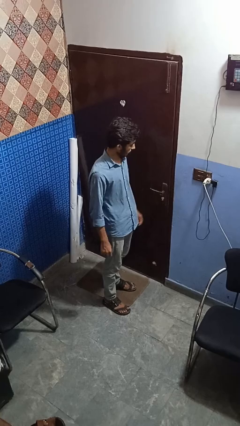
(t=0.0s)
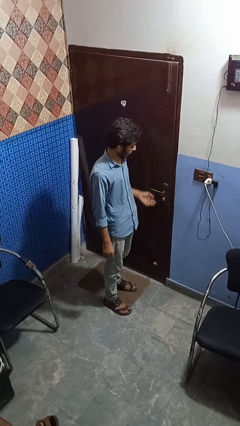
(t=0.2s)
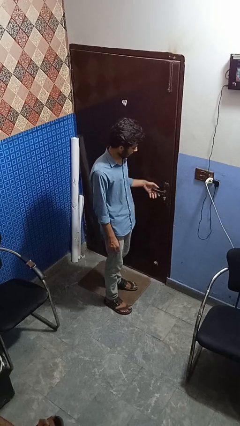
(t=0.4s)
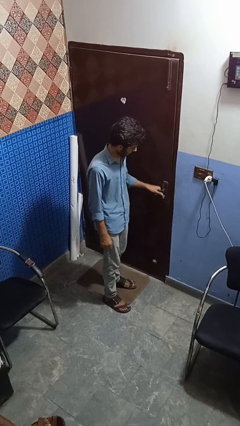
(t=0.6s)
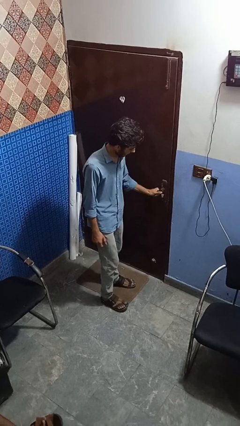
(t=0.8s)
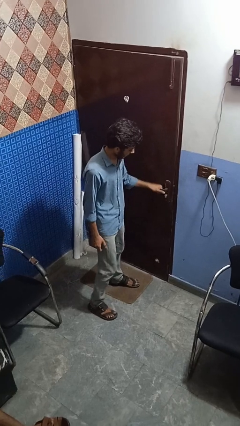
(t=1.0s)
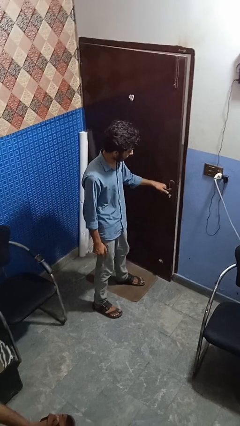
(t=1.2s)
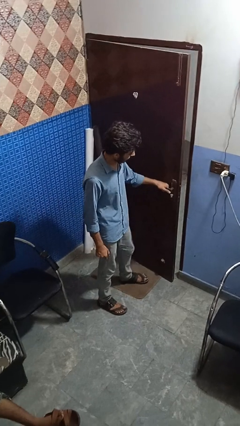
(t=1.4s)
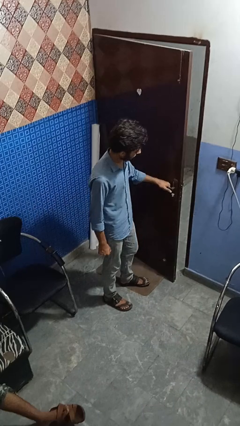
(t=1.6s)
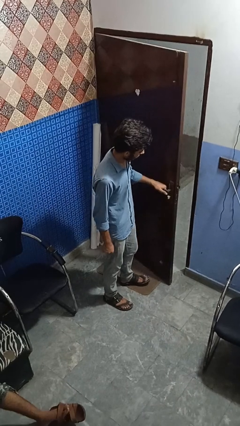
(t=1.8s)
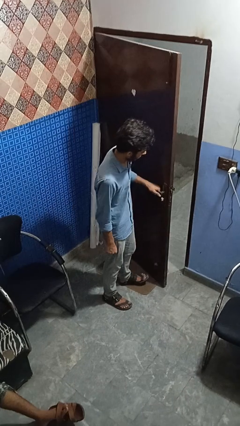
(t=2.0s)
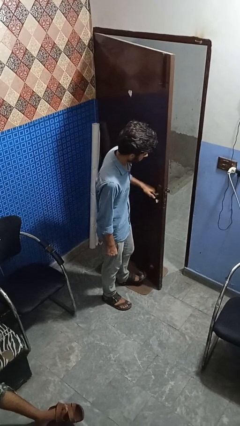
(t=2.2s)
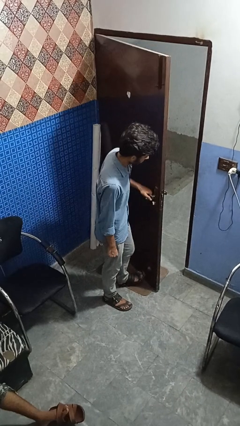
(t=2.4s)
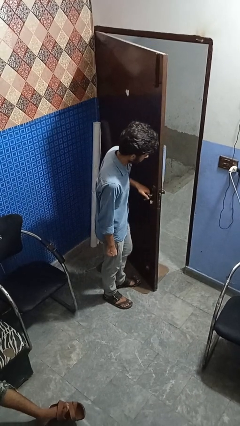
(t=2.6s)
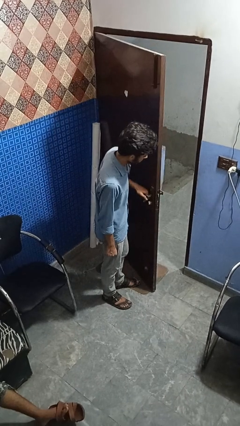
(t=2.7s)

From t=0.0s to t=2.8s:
person opens facility door

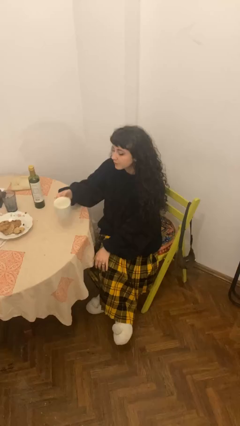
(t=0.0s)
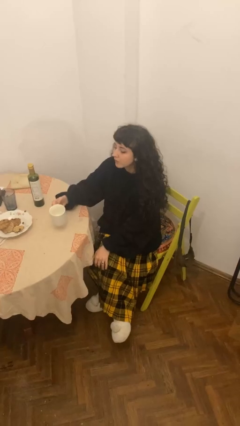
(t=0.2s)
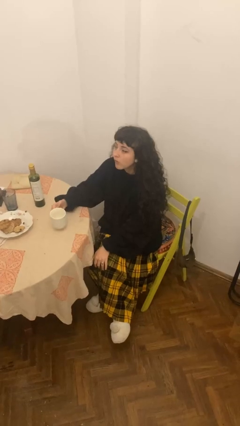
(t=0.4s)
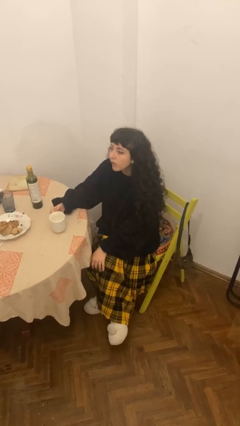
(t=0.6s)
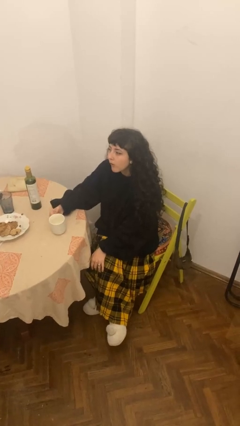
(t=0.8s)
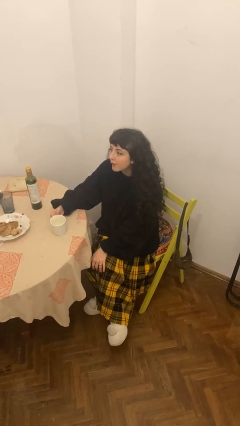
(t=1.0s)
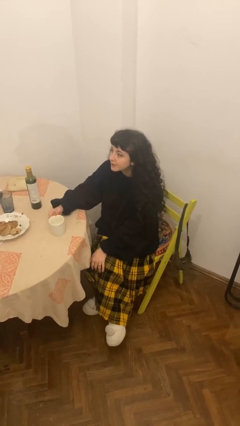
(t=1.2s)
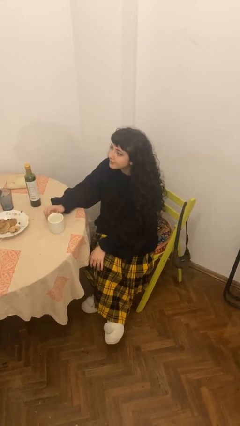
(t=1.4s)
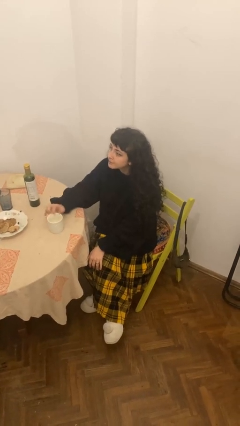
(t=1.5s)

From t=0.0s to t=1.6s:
person puts down object on table

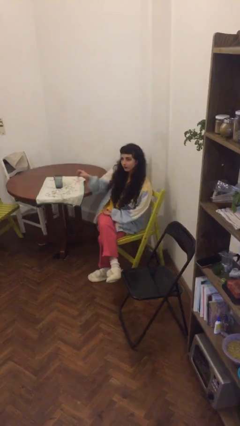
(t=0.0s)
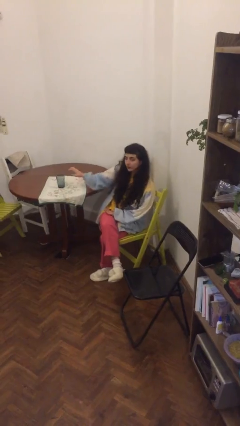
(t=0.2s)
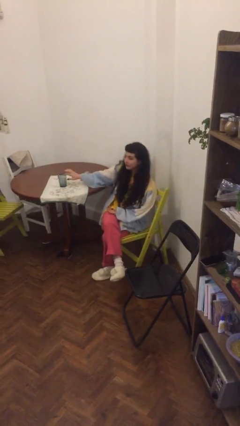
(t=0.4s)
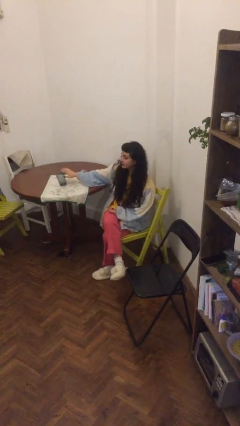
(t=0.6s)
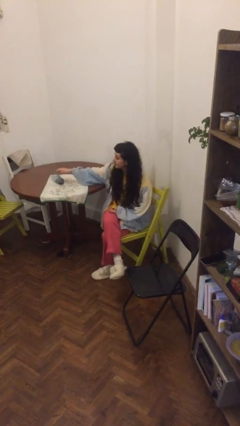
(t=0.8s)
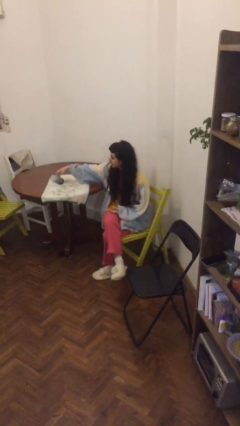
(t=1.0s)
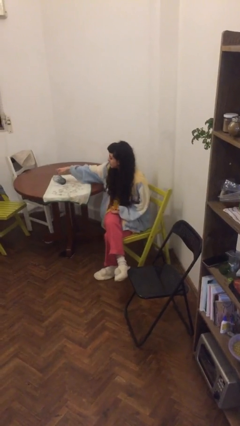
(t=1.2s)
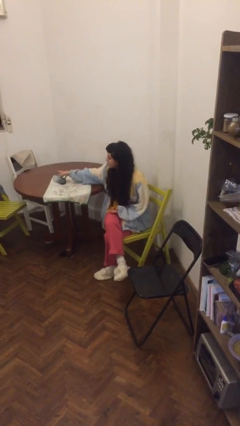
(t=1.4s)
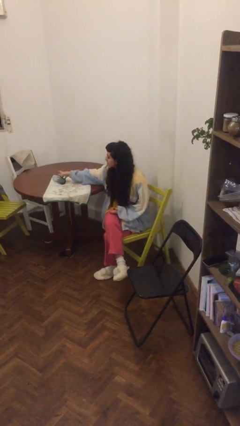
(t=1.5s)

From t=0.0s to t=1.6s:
person knocks over glass

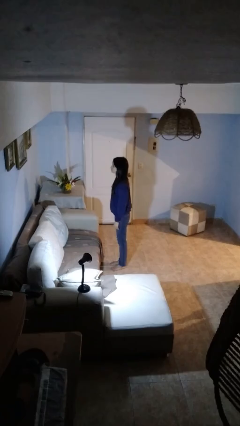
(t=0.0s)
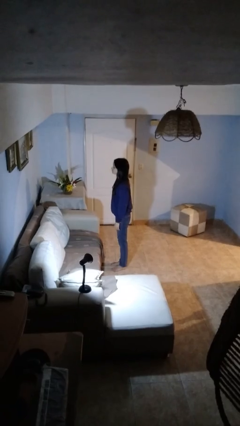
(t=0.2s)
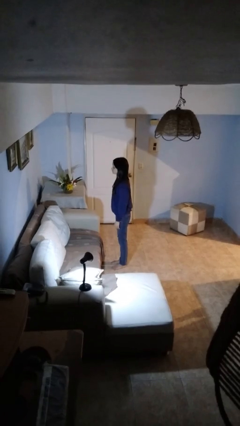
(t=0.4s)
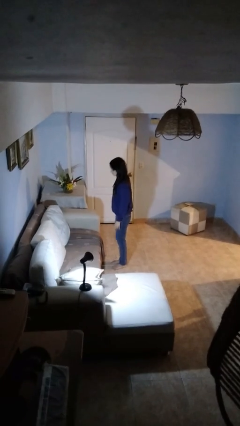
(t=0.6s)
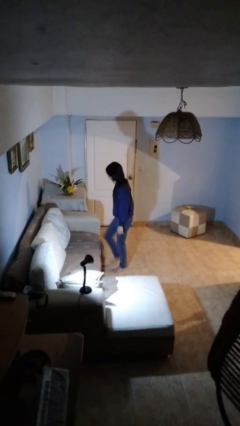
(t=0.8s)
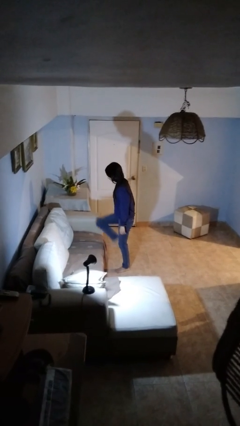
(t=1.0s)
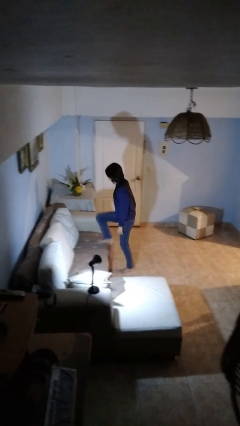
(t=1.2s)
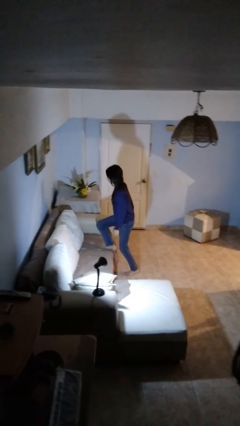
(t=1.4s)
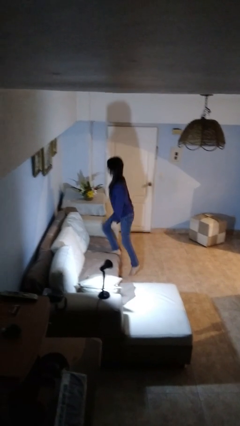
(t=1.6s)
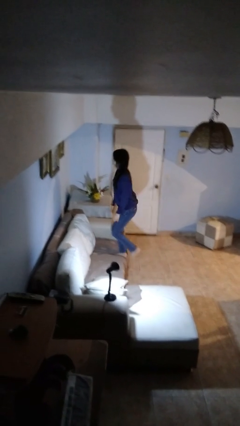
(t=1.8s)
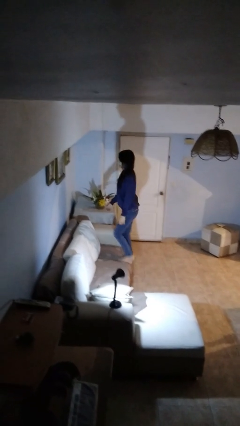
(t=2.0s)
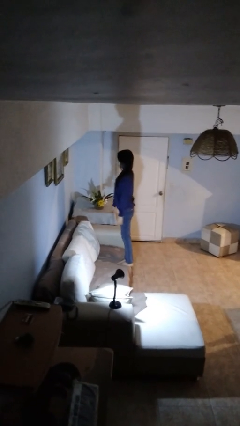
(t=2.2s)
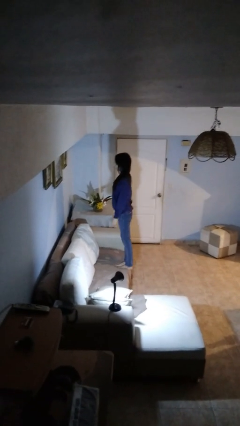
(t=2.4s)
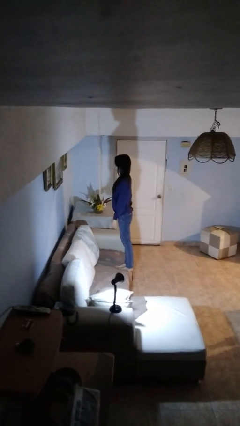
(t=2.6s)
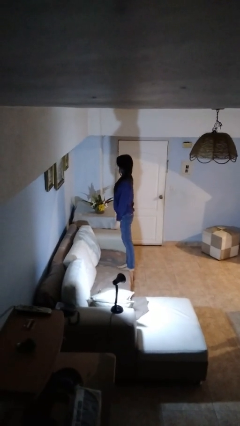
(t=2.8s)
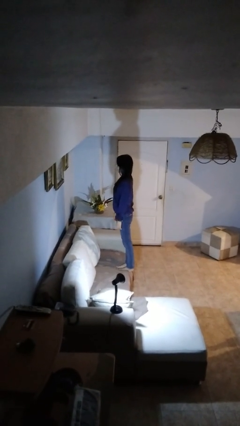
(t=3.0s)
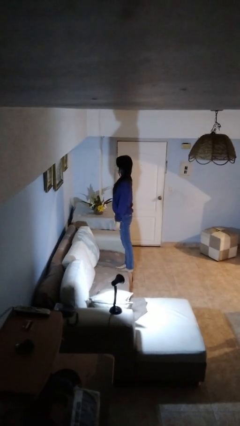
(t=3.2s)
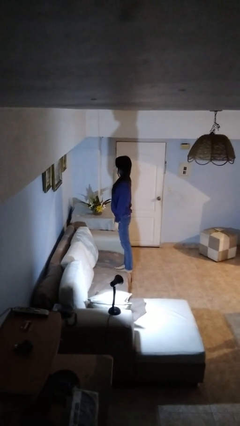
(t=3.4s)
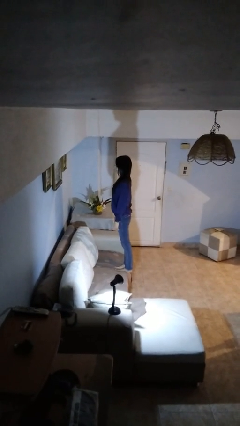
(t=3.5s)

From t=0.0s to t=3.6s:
person climbs on couch

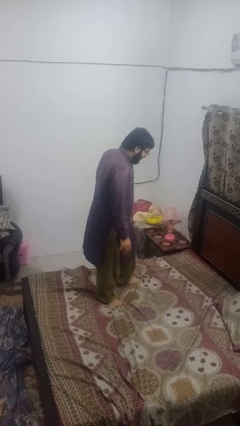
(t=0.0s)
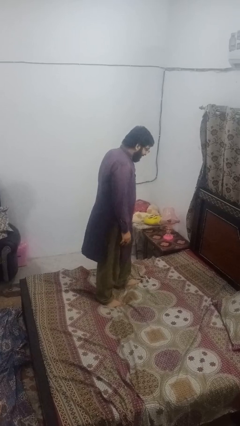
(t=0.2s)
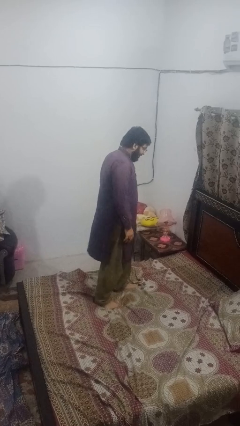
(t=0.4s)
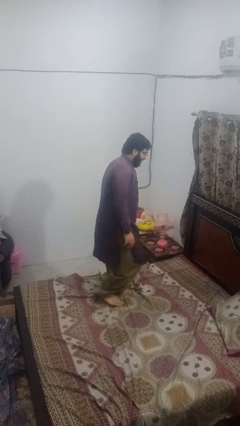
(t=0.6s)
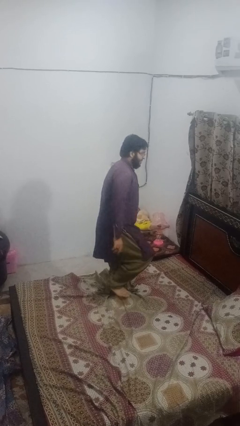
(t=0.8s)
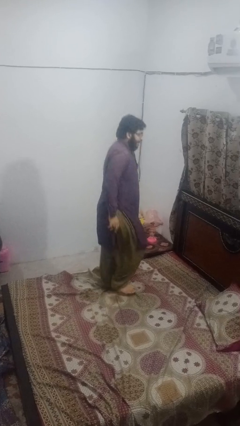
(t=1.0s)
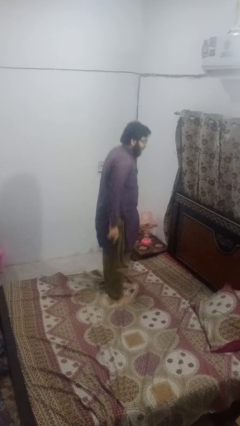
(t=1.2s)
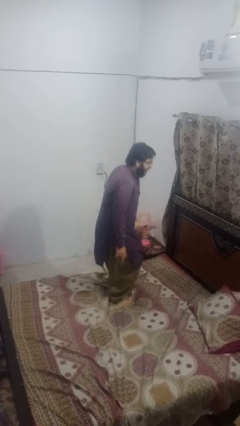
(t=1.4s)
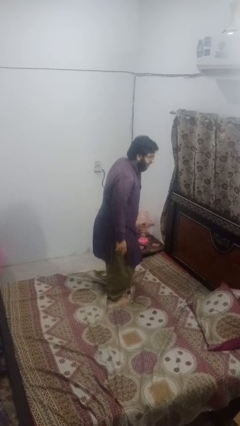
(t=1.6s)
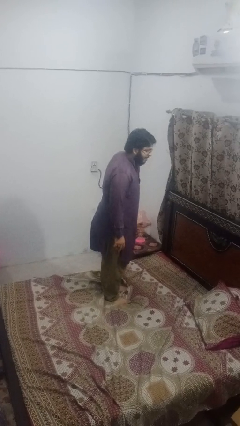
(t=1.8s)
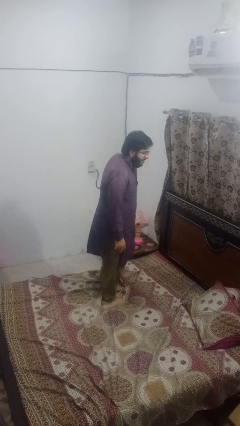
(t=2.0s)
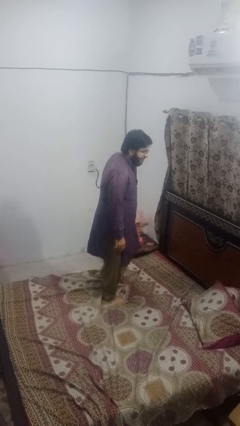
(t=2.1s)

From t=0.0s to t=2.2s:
person jumps on bed

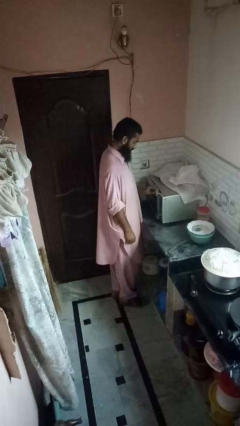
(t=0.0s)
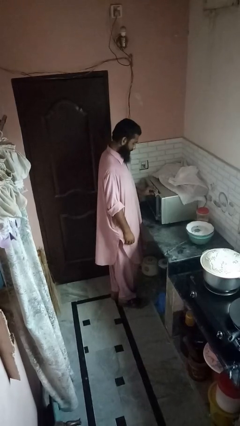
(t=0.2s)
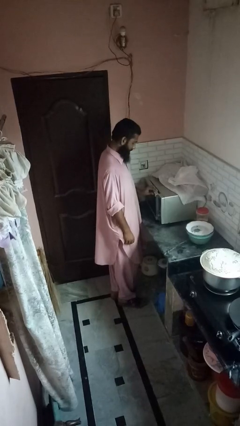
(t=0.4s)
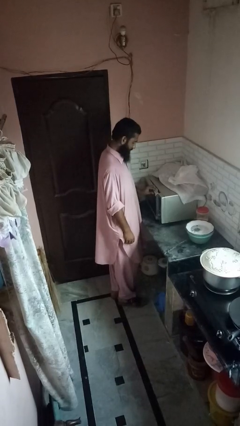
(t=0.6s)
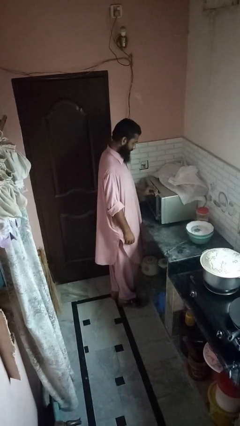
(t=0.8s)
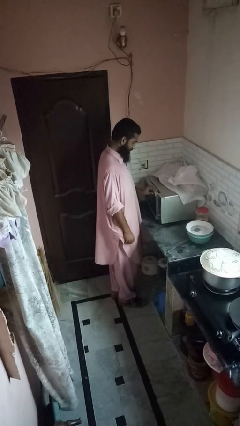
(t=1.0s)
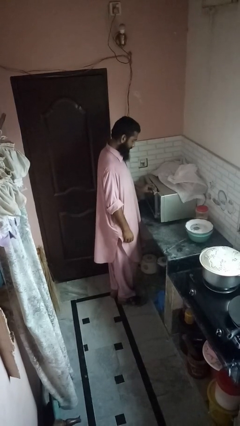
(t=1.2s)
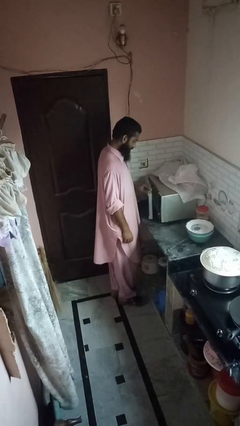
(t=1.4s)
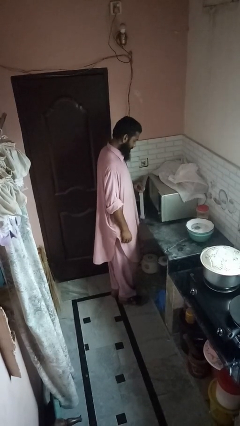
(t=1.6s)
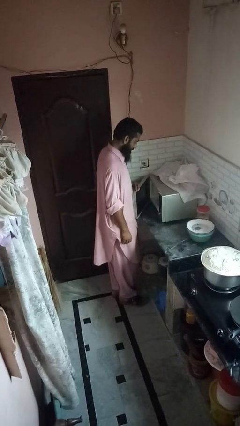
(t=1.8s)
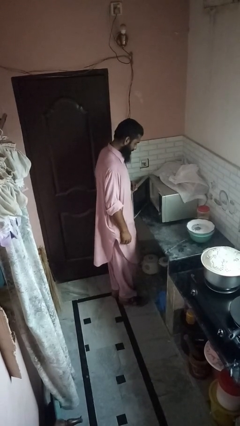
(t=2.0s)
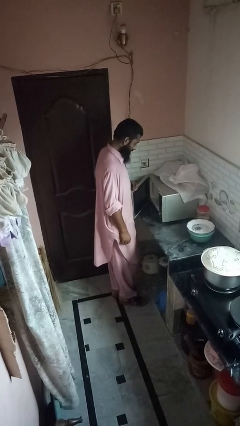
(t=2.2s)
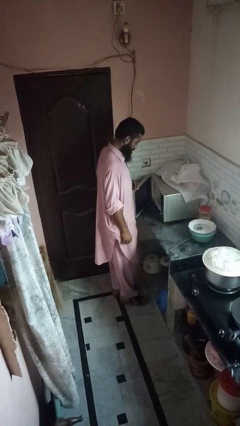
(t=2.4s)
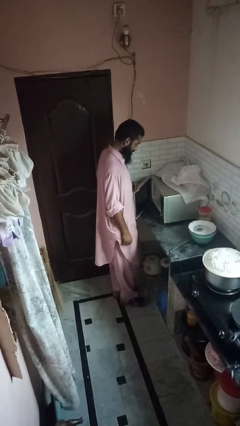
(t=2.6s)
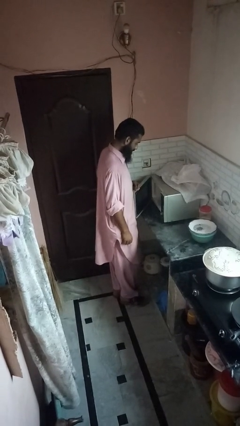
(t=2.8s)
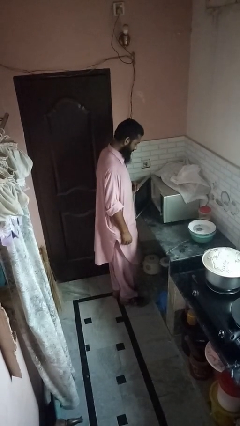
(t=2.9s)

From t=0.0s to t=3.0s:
person opens oven door

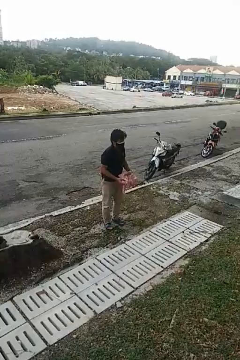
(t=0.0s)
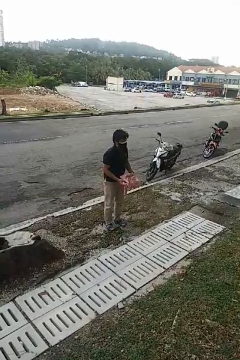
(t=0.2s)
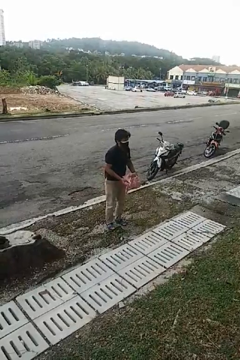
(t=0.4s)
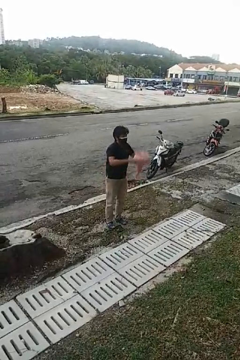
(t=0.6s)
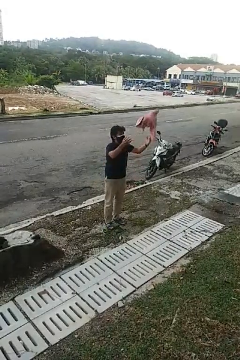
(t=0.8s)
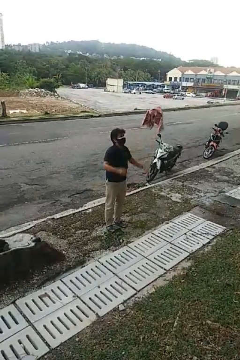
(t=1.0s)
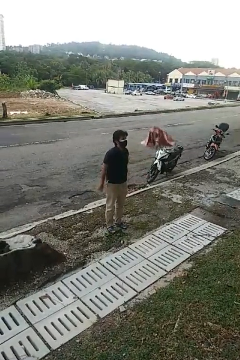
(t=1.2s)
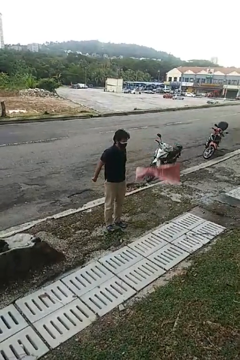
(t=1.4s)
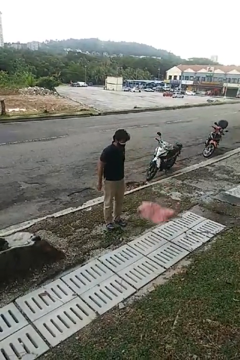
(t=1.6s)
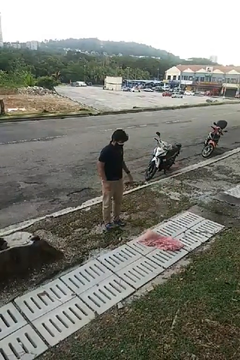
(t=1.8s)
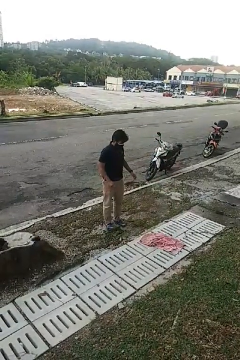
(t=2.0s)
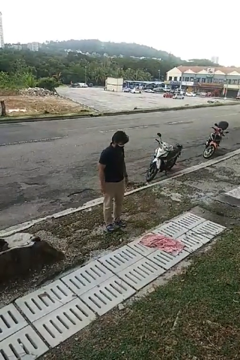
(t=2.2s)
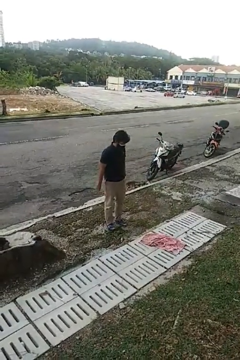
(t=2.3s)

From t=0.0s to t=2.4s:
person throws object into air

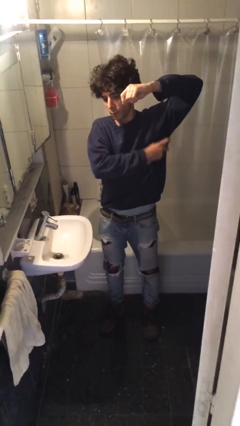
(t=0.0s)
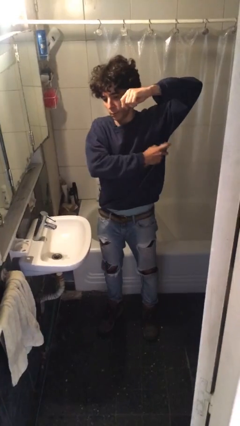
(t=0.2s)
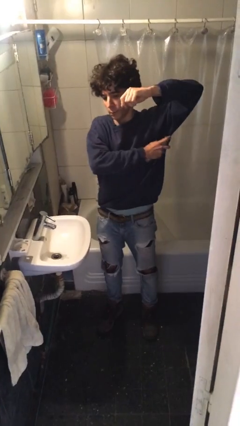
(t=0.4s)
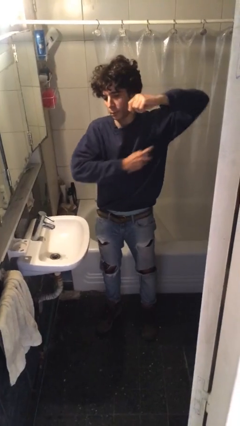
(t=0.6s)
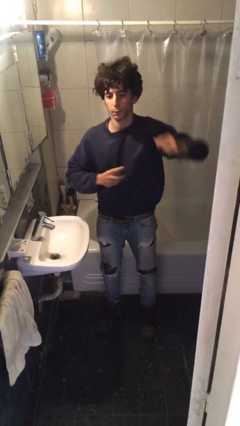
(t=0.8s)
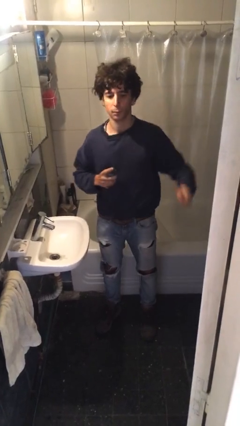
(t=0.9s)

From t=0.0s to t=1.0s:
person applies deodorant
